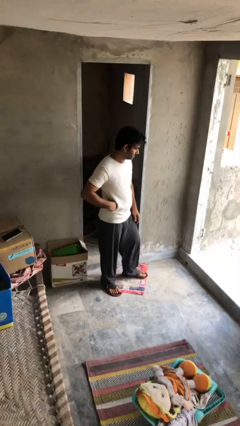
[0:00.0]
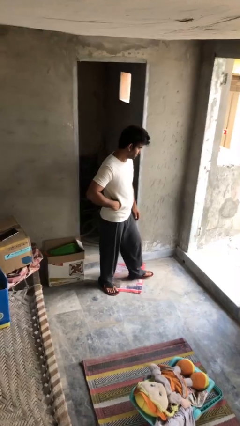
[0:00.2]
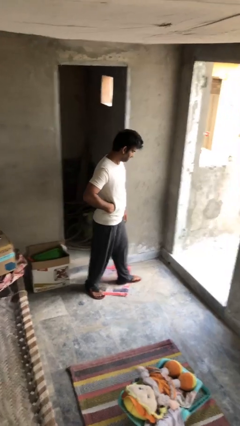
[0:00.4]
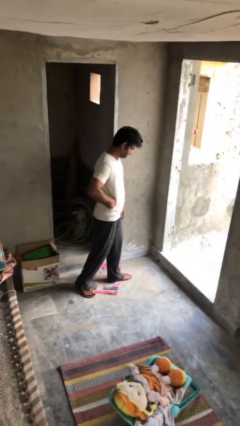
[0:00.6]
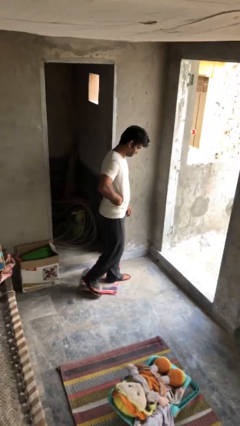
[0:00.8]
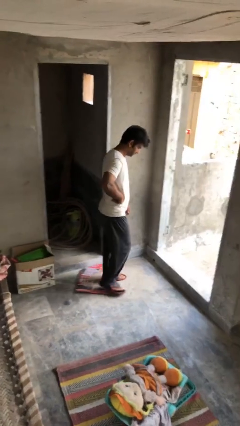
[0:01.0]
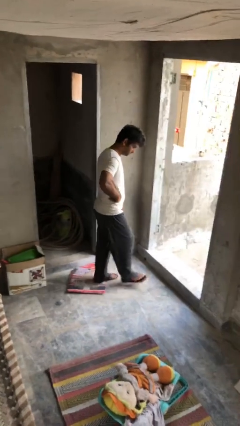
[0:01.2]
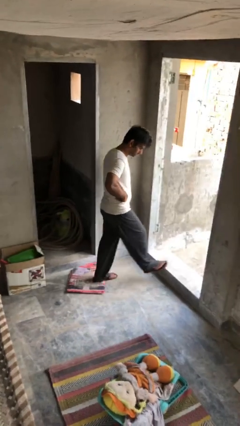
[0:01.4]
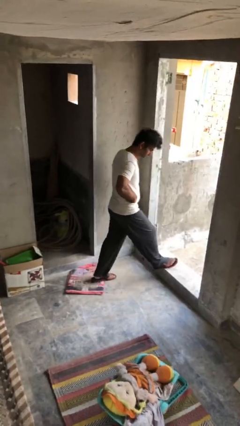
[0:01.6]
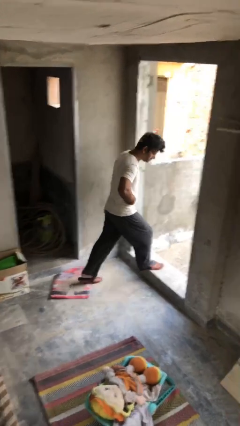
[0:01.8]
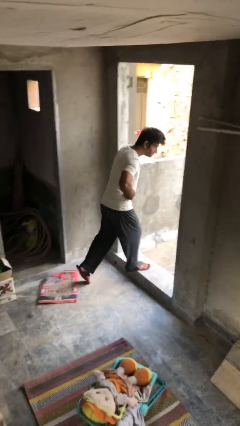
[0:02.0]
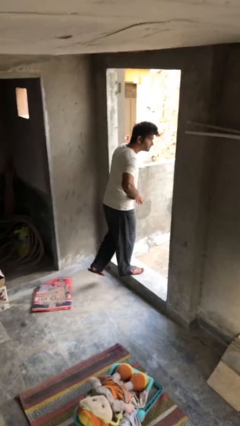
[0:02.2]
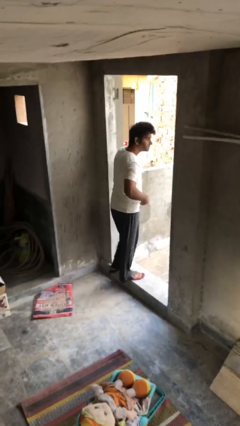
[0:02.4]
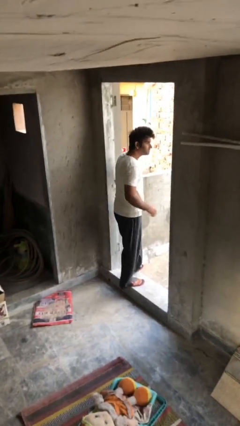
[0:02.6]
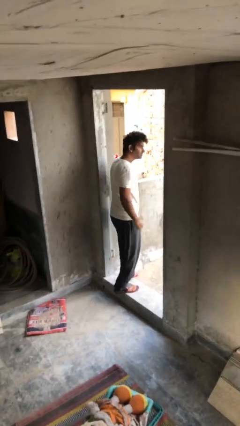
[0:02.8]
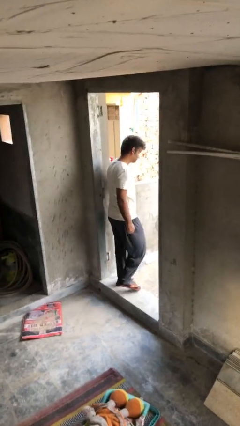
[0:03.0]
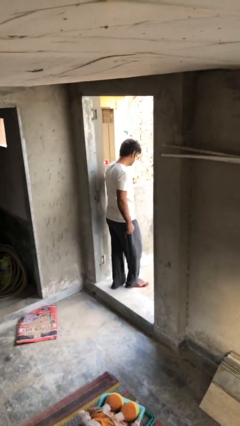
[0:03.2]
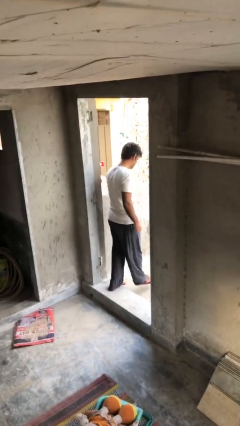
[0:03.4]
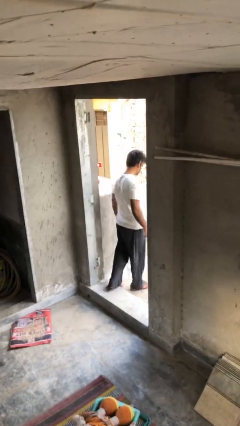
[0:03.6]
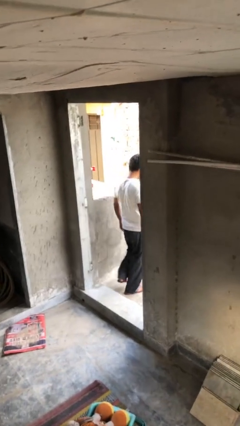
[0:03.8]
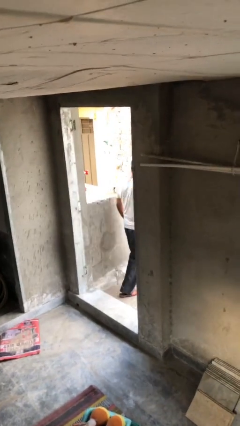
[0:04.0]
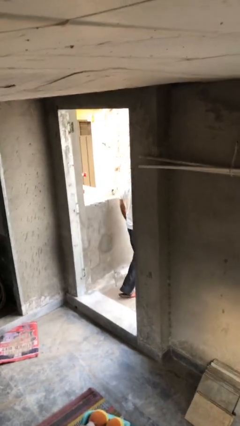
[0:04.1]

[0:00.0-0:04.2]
person exits scene through structure

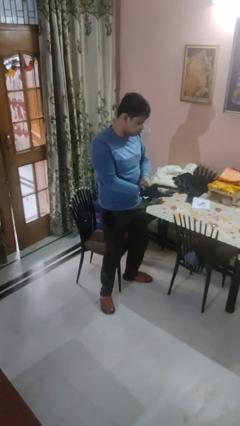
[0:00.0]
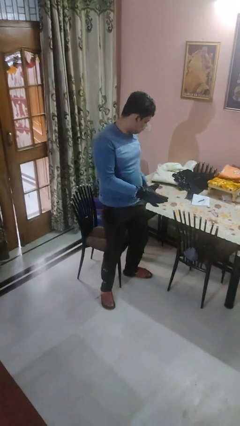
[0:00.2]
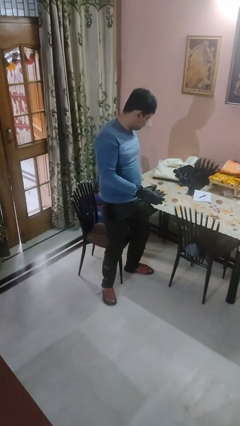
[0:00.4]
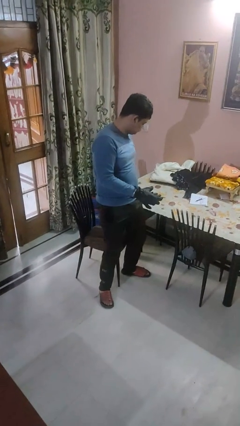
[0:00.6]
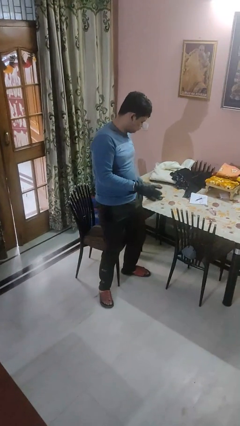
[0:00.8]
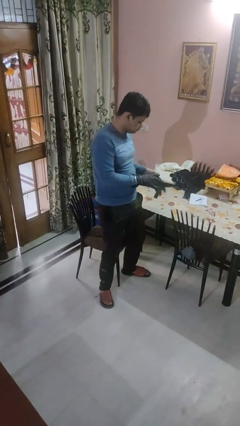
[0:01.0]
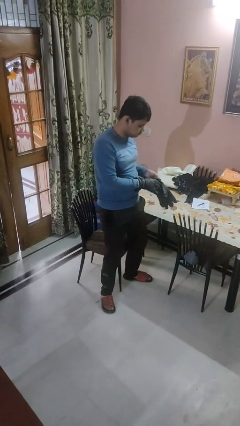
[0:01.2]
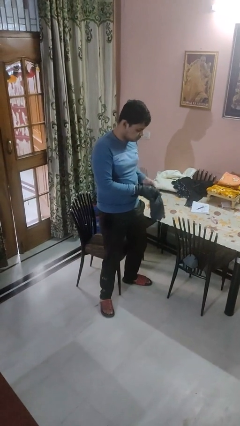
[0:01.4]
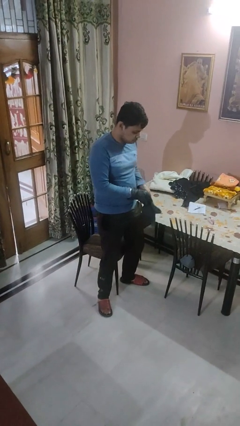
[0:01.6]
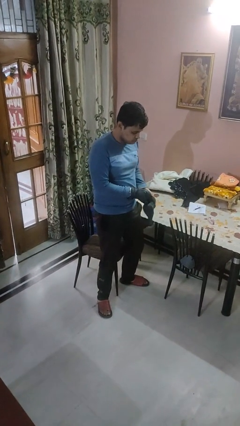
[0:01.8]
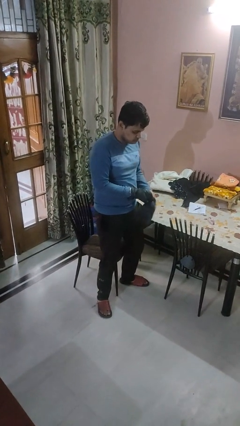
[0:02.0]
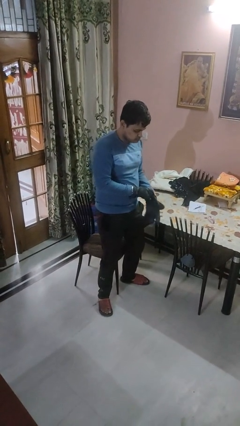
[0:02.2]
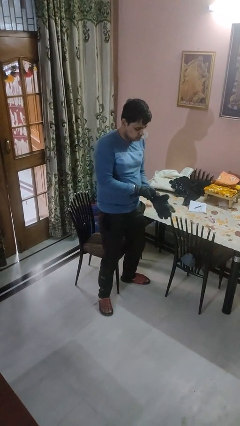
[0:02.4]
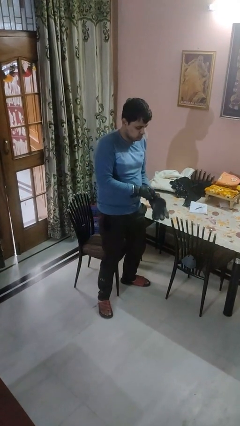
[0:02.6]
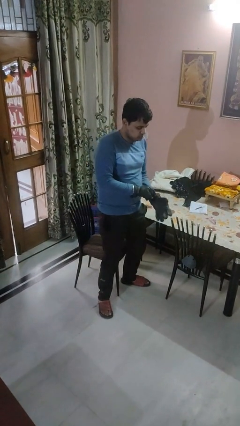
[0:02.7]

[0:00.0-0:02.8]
person puts on gloves

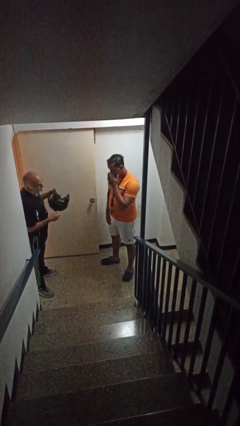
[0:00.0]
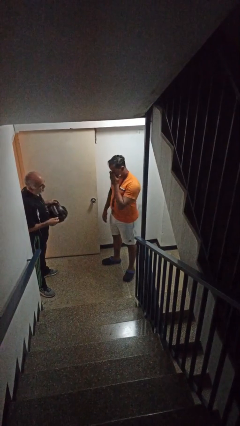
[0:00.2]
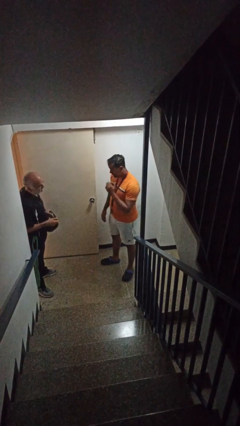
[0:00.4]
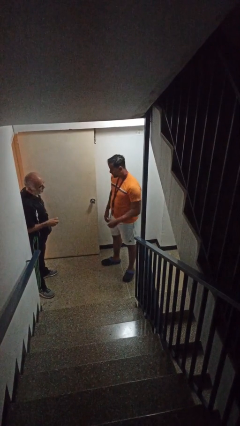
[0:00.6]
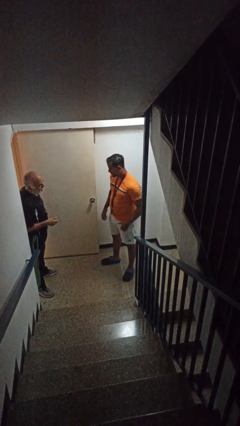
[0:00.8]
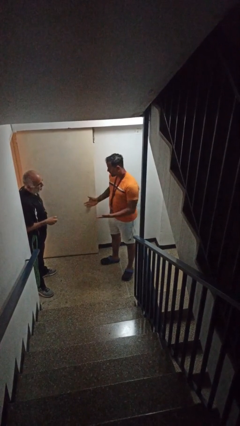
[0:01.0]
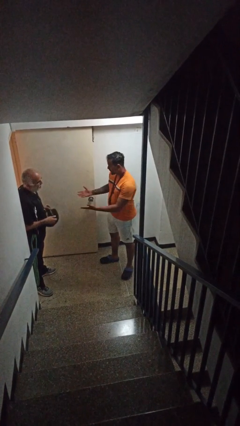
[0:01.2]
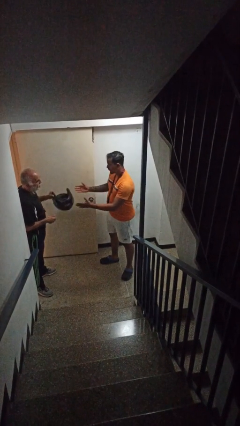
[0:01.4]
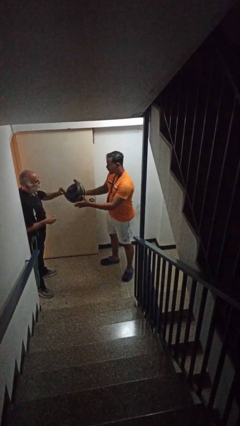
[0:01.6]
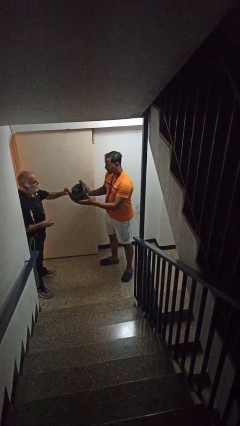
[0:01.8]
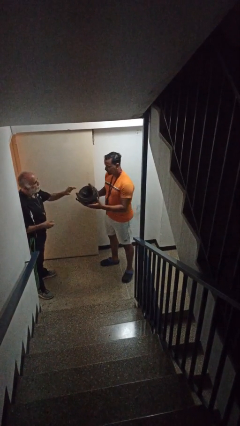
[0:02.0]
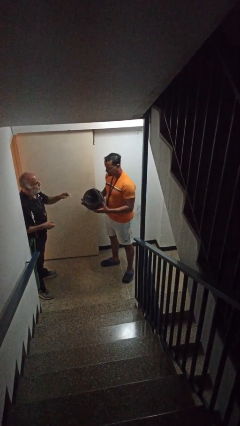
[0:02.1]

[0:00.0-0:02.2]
person transfers object to person

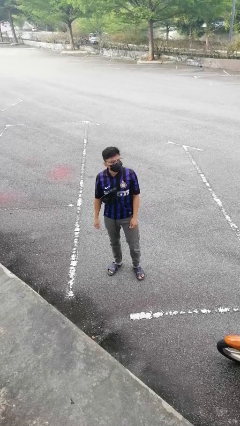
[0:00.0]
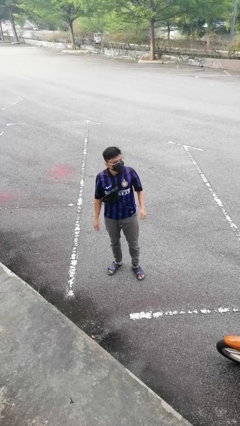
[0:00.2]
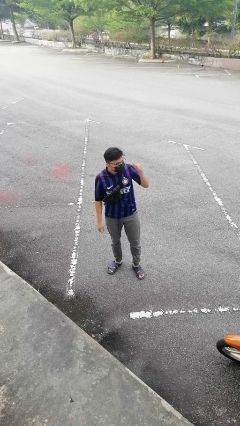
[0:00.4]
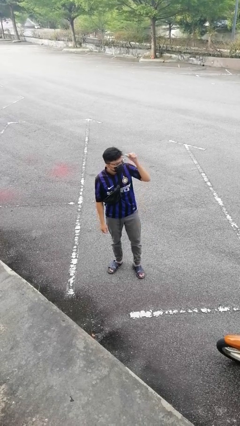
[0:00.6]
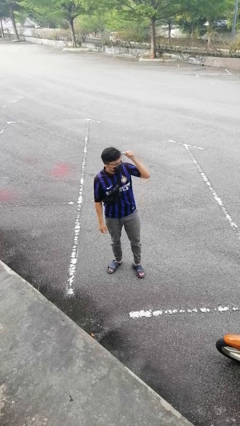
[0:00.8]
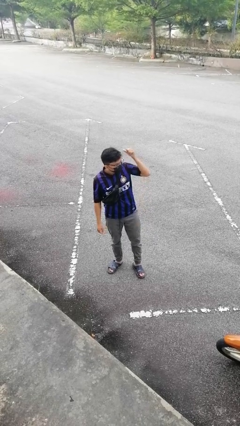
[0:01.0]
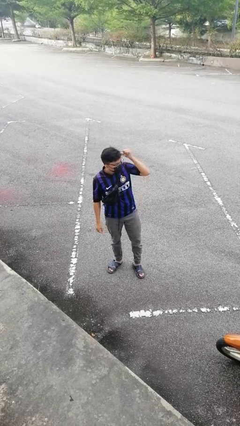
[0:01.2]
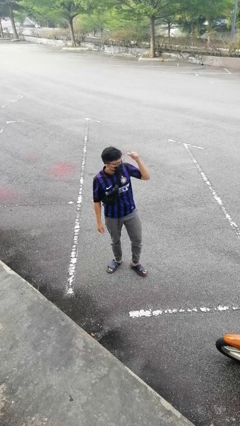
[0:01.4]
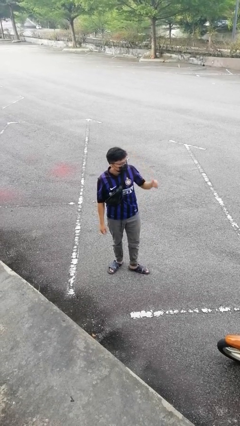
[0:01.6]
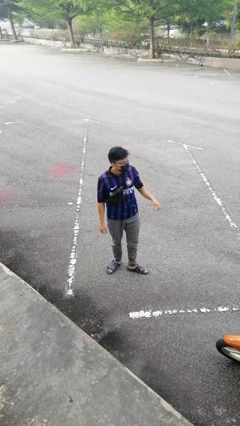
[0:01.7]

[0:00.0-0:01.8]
person gestures behind me

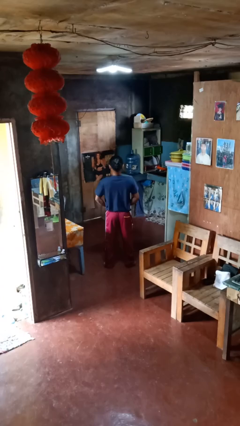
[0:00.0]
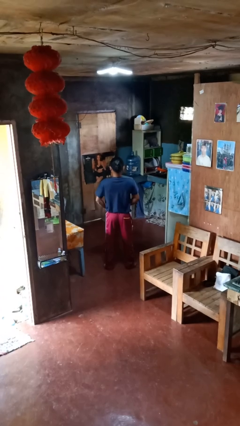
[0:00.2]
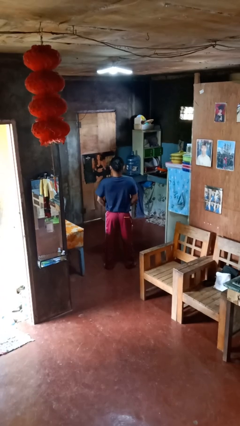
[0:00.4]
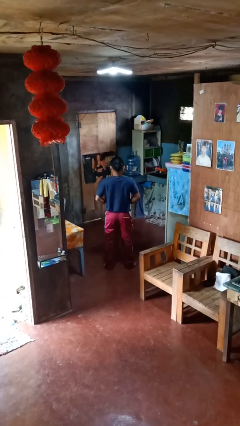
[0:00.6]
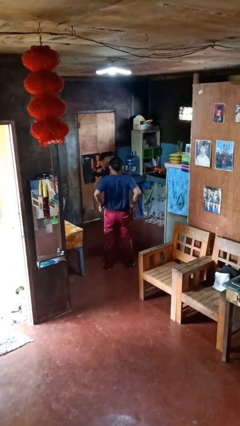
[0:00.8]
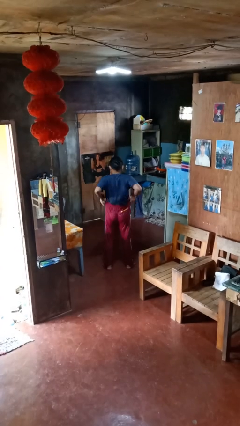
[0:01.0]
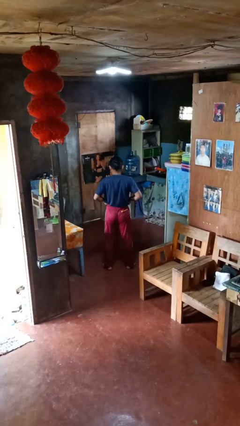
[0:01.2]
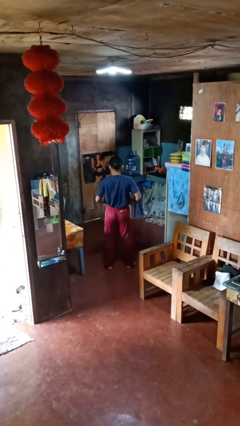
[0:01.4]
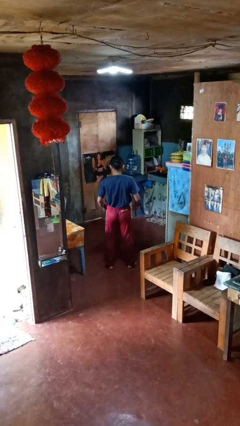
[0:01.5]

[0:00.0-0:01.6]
person hikes up pants

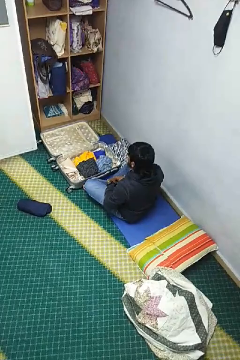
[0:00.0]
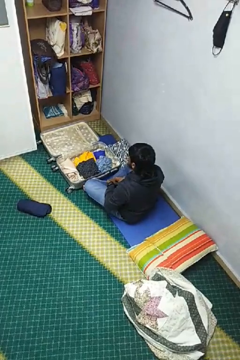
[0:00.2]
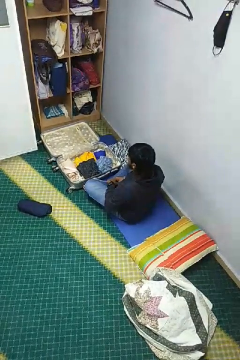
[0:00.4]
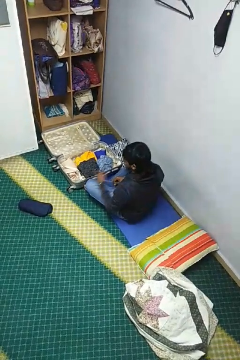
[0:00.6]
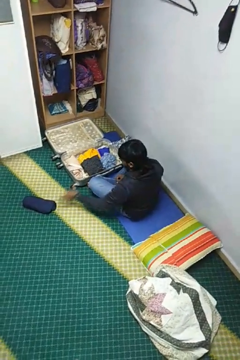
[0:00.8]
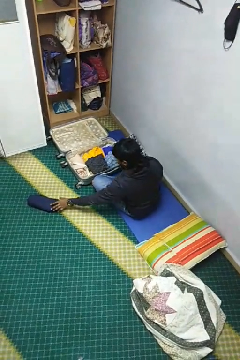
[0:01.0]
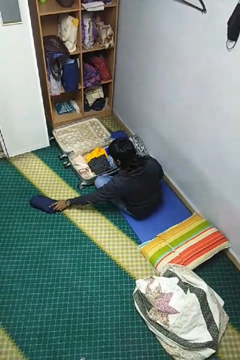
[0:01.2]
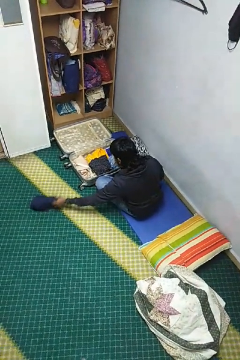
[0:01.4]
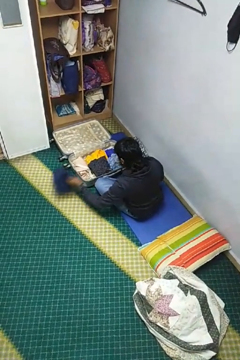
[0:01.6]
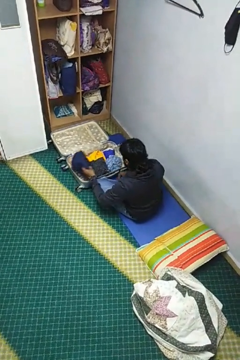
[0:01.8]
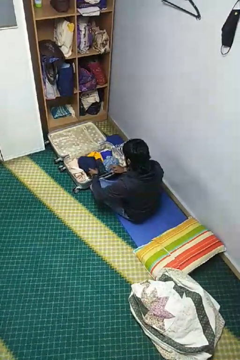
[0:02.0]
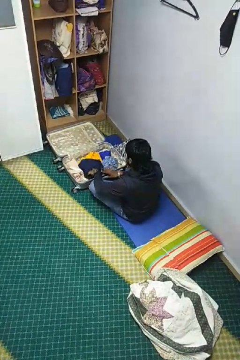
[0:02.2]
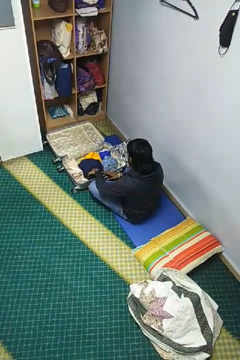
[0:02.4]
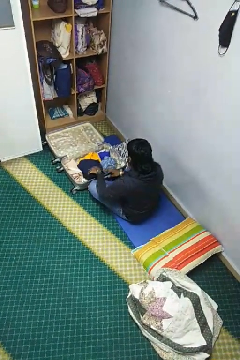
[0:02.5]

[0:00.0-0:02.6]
person loads clothes into suitcase

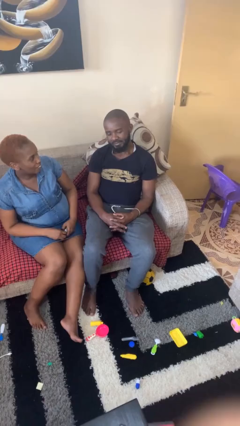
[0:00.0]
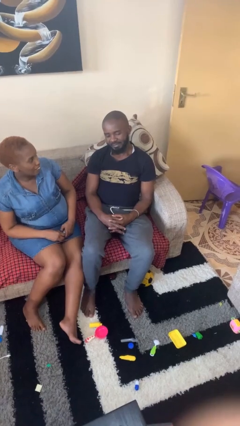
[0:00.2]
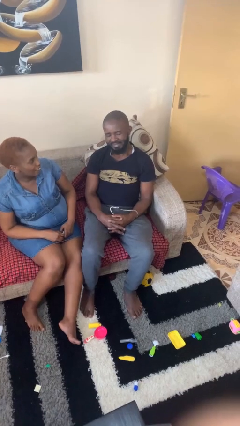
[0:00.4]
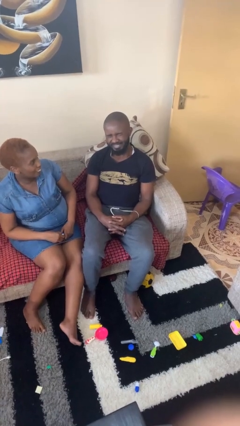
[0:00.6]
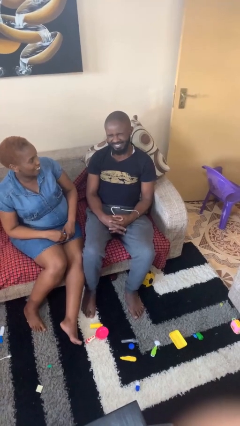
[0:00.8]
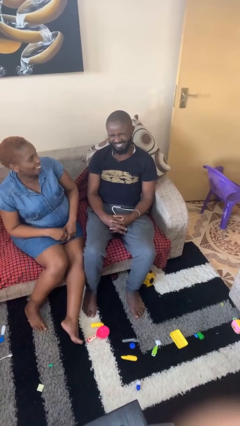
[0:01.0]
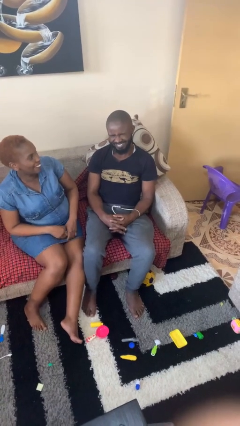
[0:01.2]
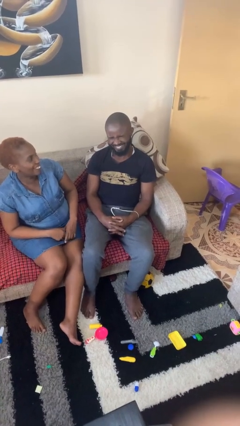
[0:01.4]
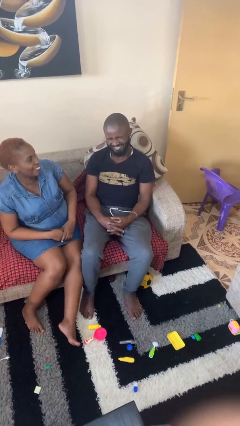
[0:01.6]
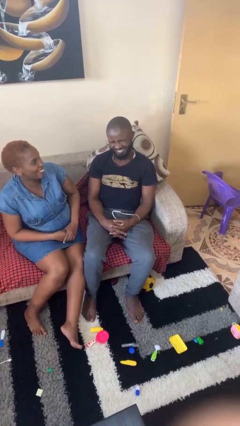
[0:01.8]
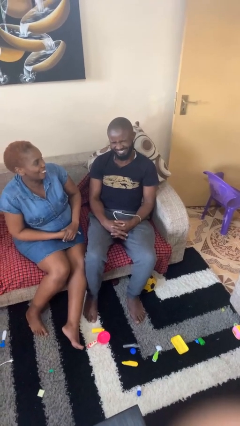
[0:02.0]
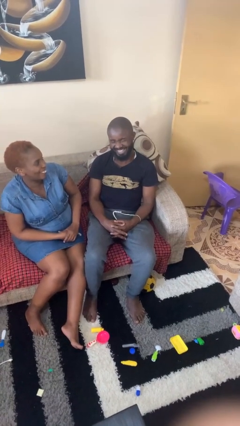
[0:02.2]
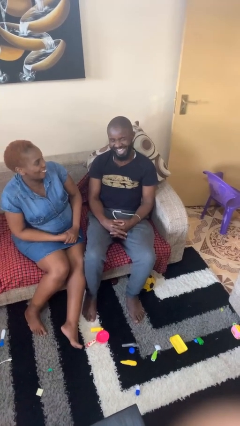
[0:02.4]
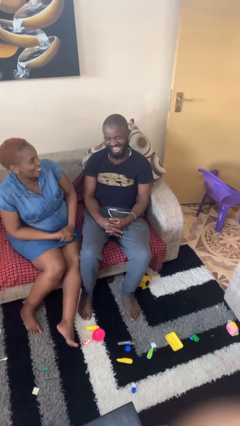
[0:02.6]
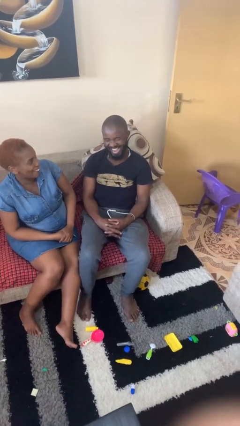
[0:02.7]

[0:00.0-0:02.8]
person laughs with person
